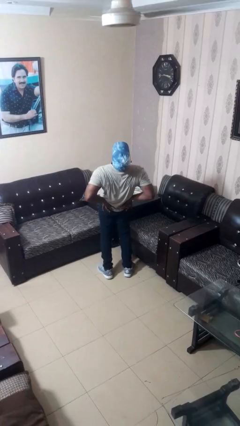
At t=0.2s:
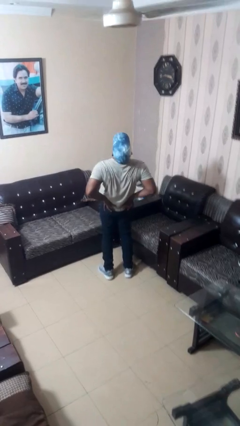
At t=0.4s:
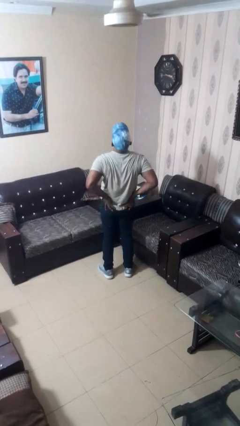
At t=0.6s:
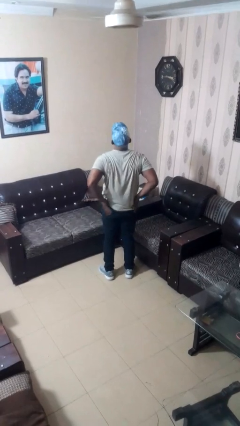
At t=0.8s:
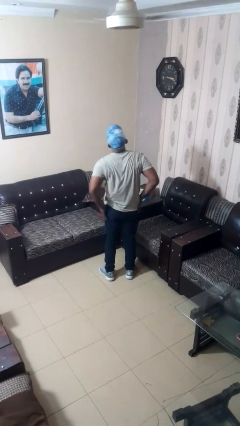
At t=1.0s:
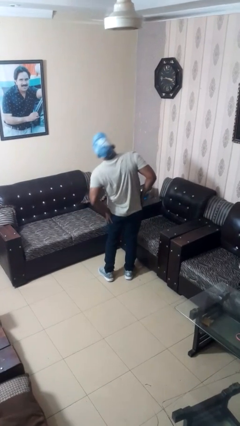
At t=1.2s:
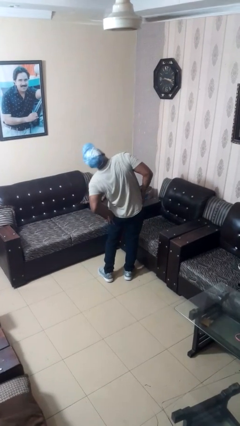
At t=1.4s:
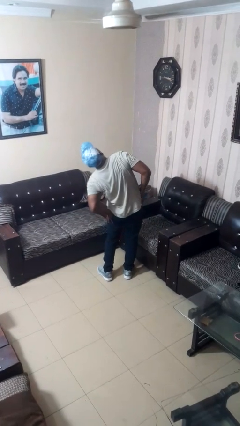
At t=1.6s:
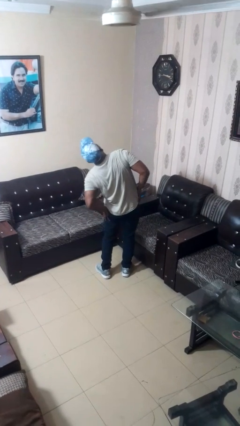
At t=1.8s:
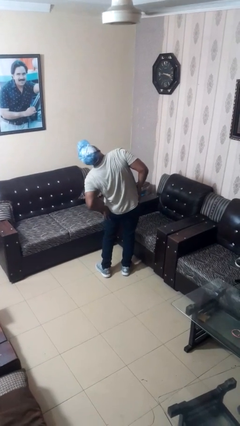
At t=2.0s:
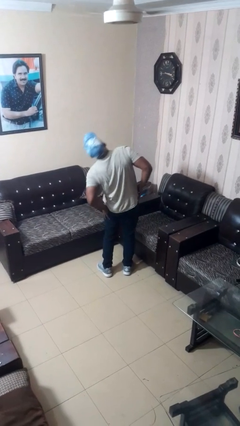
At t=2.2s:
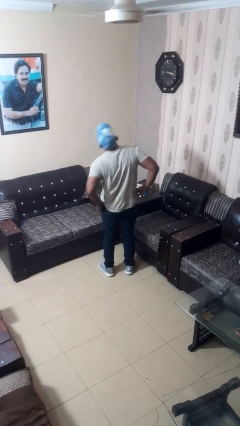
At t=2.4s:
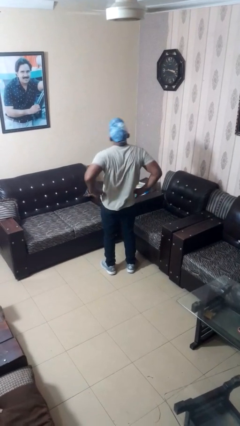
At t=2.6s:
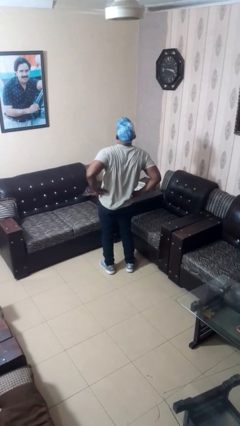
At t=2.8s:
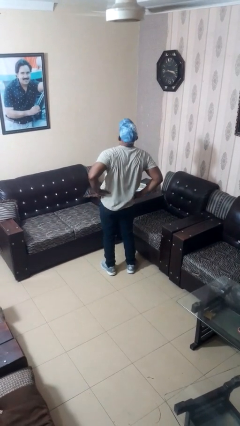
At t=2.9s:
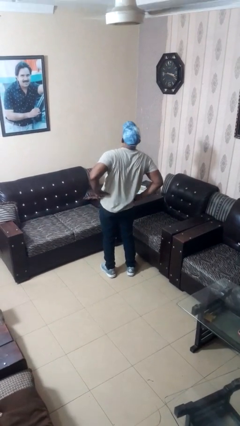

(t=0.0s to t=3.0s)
person stretches arms to side

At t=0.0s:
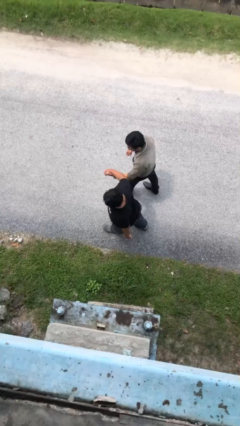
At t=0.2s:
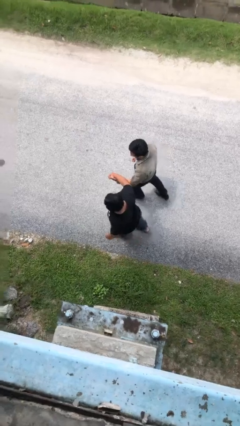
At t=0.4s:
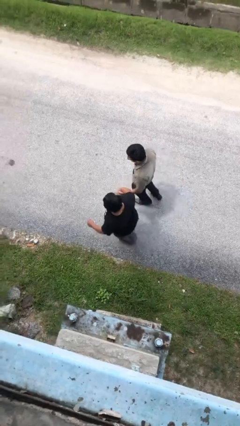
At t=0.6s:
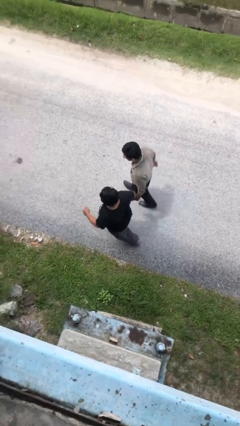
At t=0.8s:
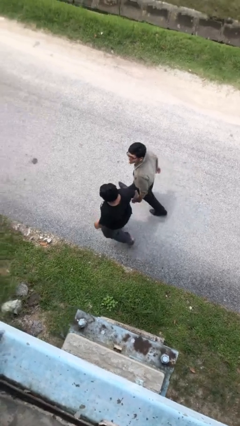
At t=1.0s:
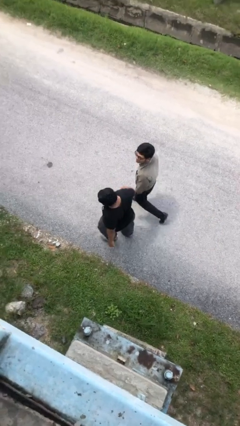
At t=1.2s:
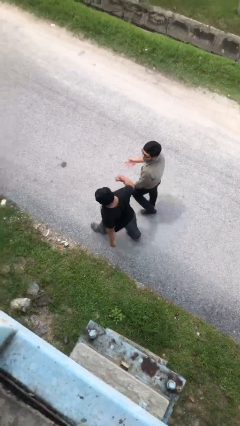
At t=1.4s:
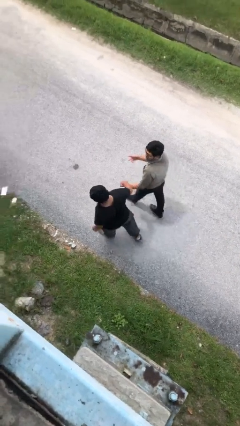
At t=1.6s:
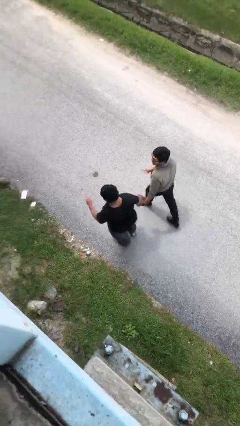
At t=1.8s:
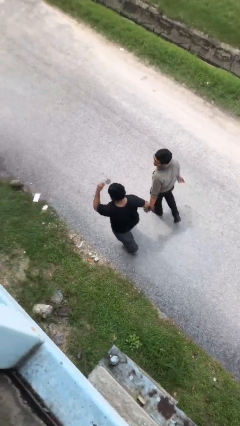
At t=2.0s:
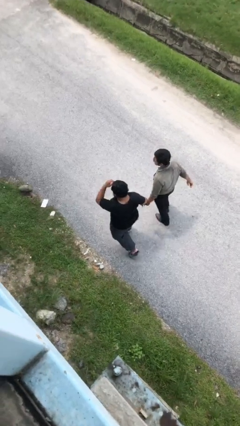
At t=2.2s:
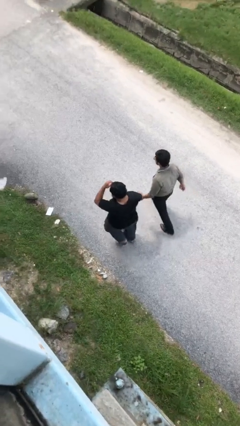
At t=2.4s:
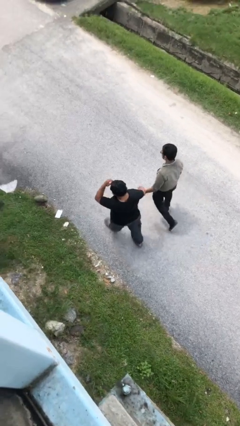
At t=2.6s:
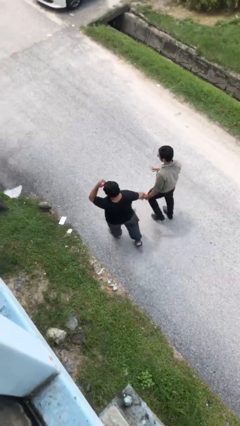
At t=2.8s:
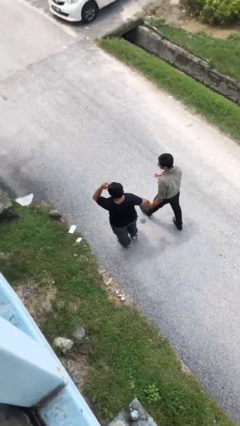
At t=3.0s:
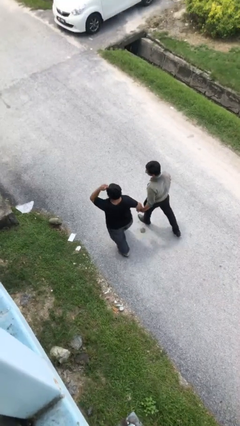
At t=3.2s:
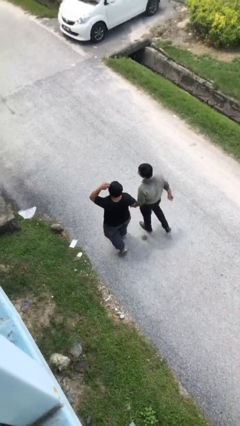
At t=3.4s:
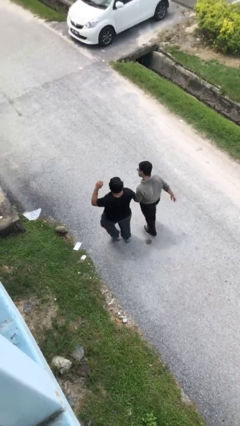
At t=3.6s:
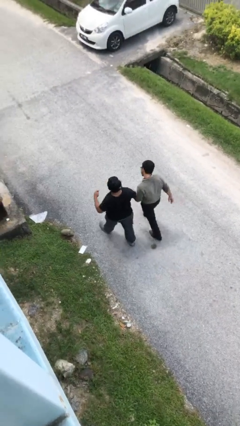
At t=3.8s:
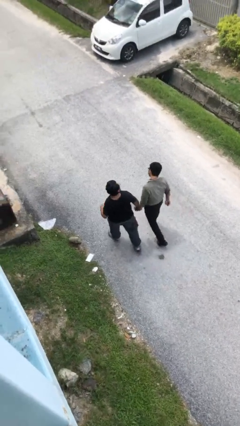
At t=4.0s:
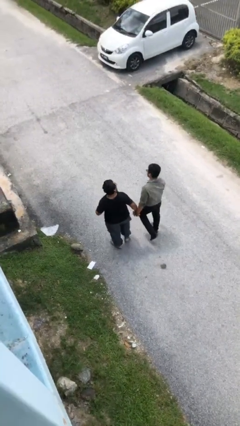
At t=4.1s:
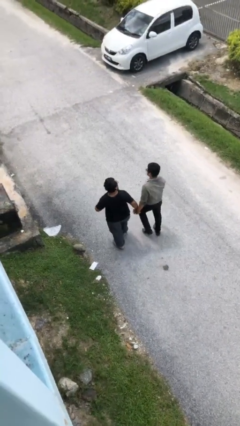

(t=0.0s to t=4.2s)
person holds hand

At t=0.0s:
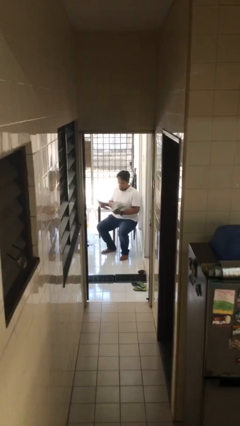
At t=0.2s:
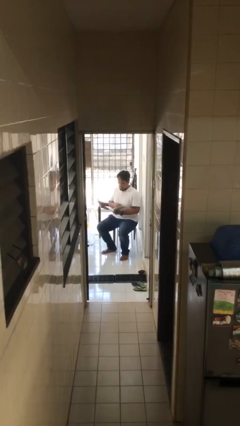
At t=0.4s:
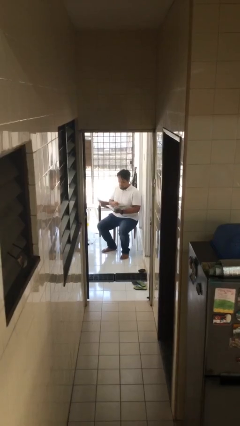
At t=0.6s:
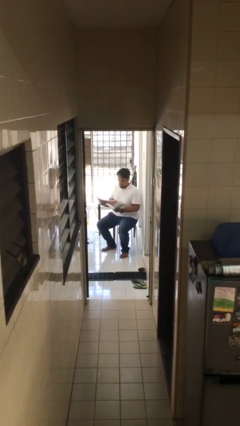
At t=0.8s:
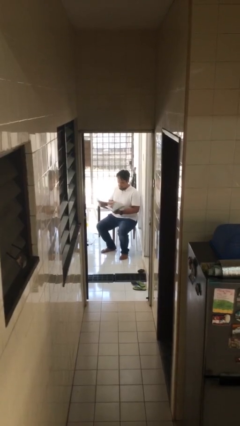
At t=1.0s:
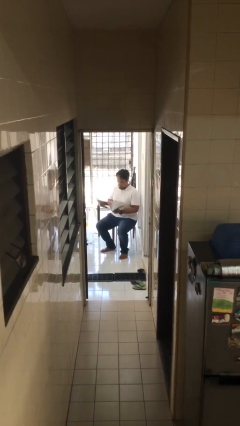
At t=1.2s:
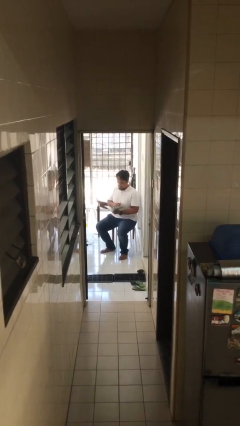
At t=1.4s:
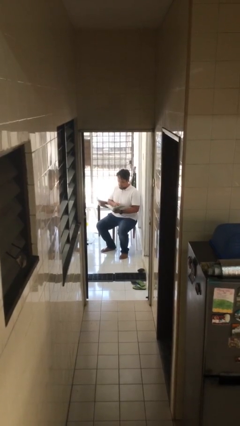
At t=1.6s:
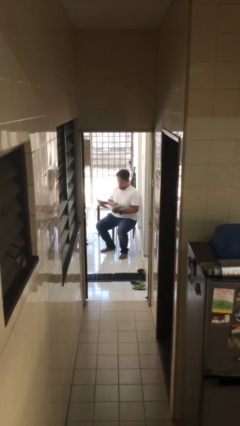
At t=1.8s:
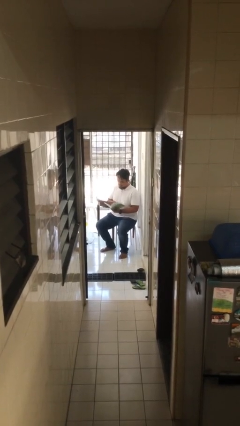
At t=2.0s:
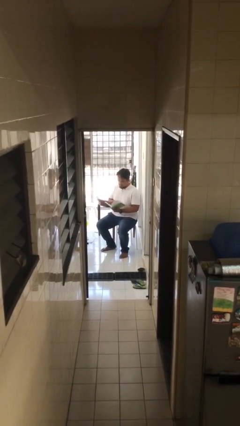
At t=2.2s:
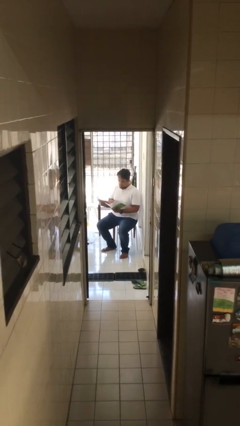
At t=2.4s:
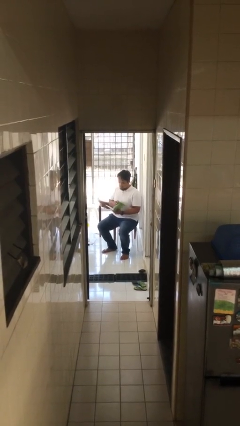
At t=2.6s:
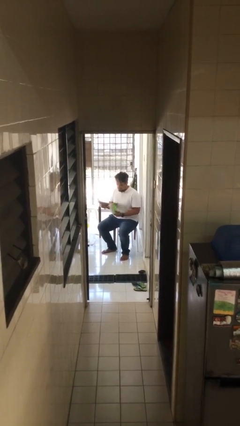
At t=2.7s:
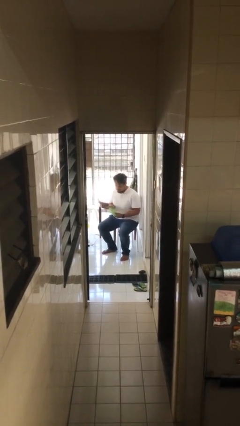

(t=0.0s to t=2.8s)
person reads document

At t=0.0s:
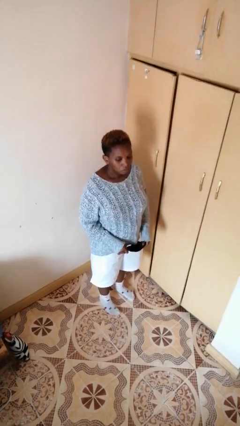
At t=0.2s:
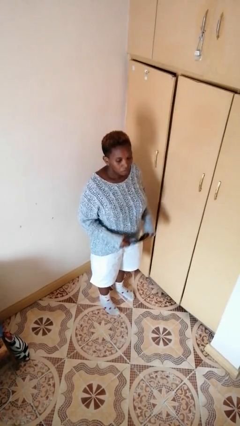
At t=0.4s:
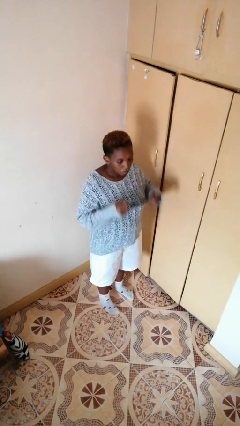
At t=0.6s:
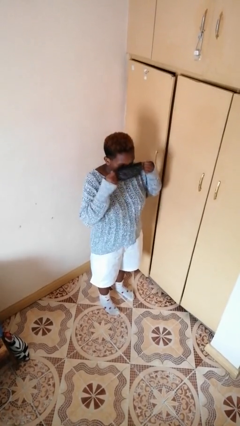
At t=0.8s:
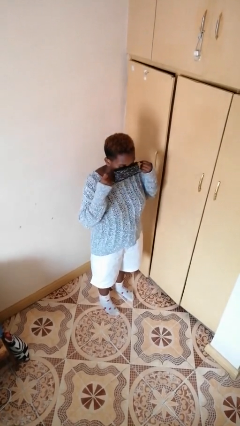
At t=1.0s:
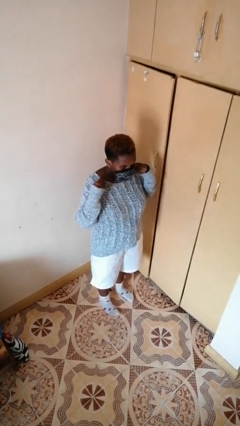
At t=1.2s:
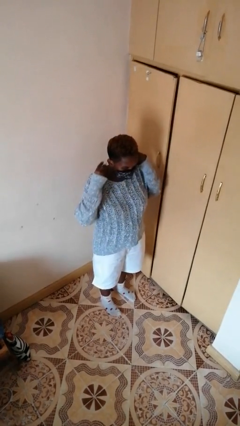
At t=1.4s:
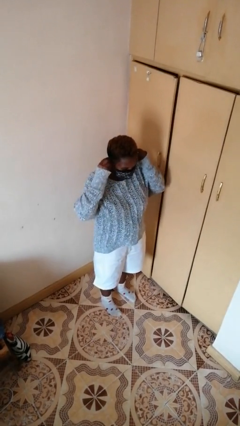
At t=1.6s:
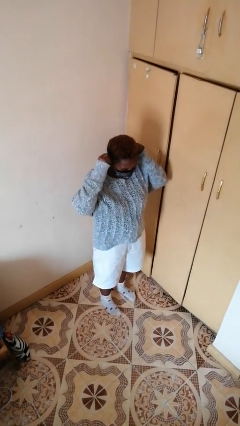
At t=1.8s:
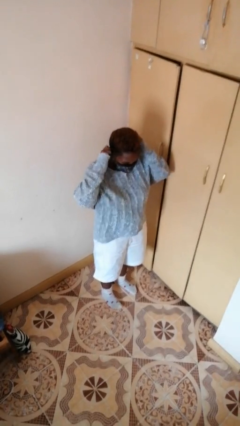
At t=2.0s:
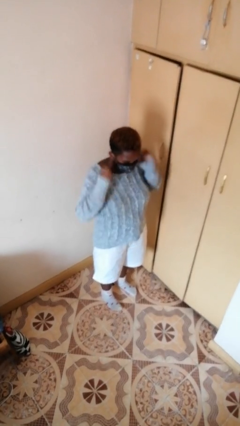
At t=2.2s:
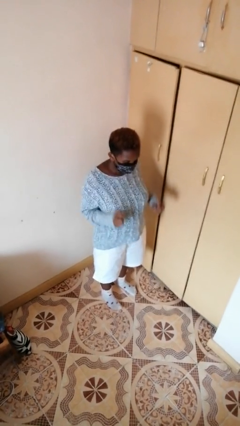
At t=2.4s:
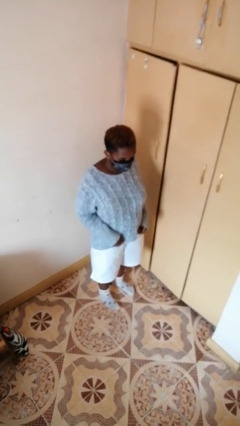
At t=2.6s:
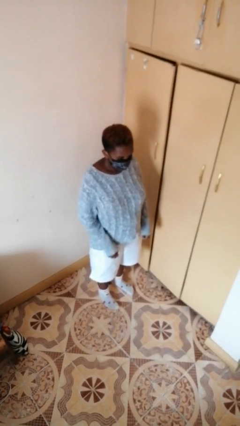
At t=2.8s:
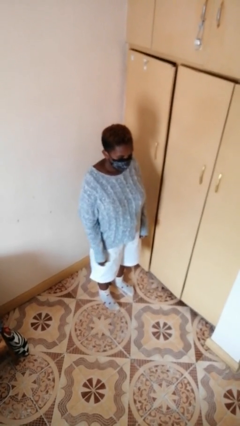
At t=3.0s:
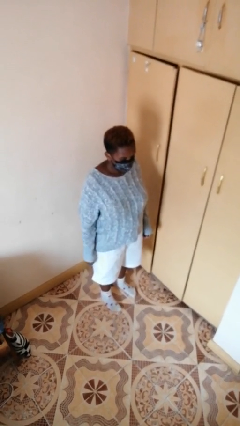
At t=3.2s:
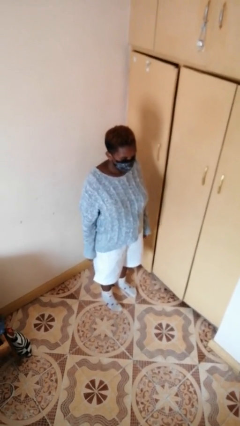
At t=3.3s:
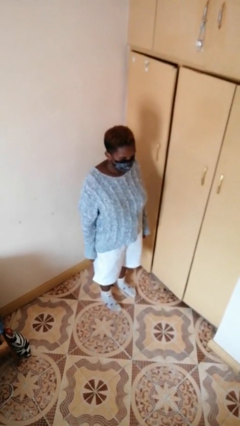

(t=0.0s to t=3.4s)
person puts on facemask

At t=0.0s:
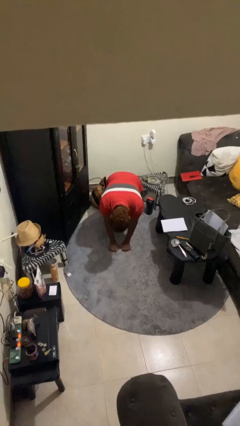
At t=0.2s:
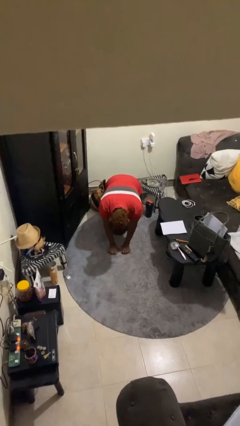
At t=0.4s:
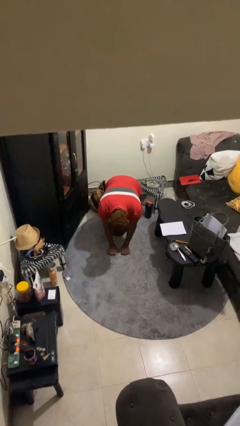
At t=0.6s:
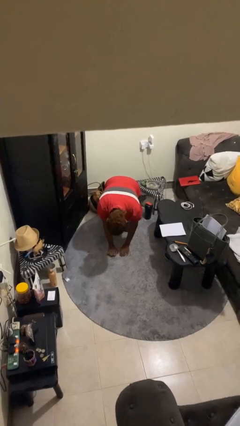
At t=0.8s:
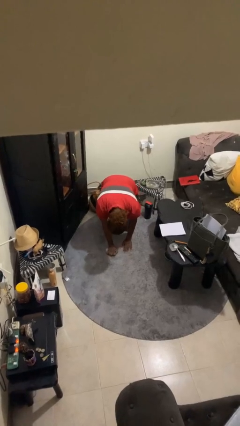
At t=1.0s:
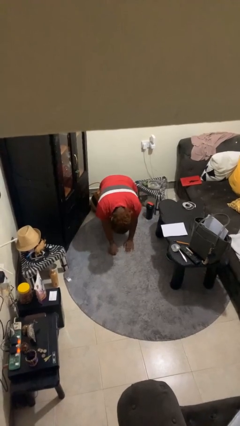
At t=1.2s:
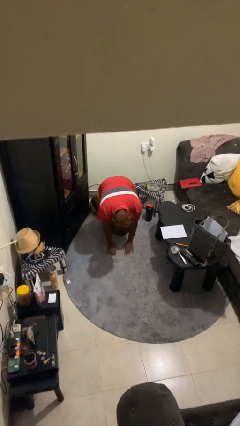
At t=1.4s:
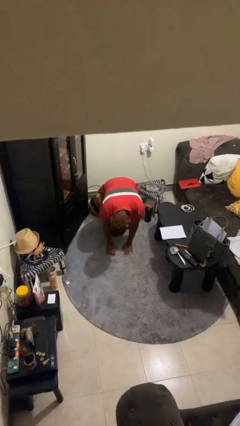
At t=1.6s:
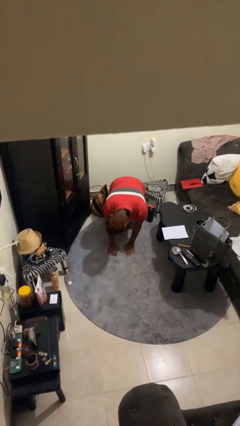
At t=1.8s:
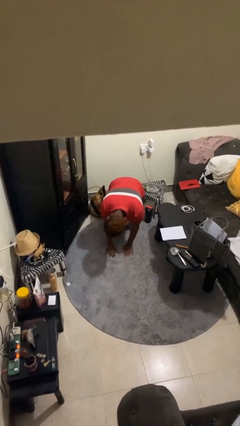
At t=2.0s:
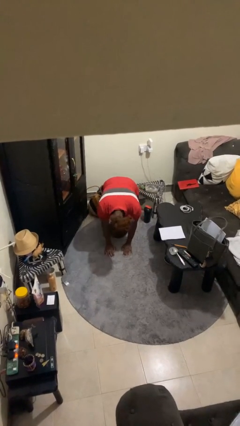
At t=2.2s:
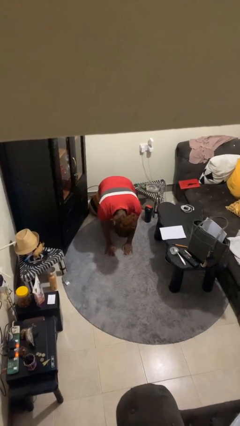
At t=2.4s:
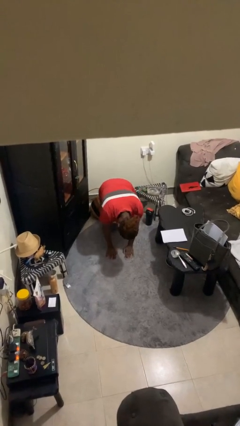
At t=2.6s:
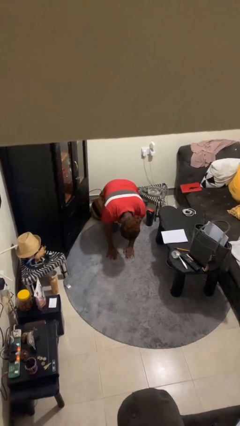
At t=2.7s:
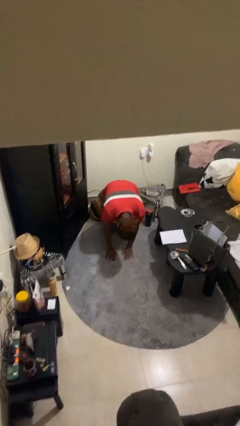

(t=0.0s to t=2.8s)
person crawls

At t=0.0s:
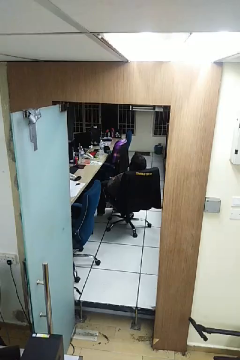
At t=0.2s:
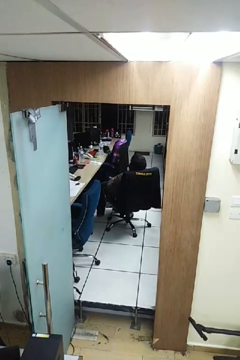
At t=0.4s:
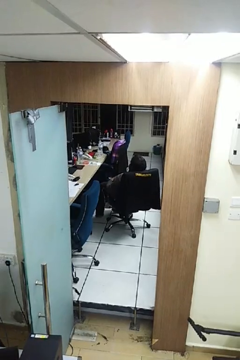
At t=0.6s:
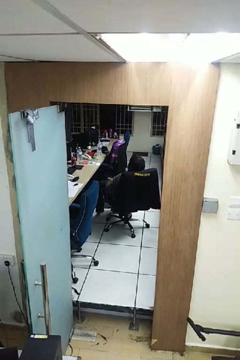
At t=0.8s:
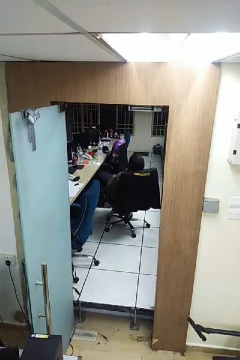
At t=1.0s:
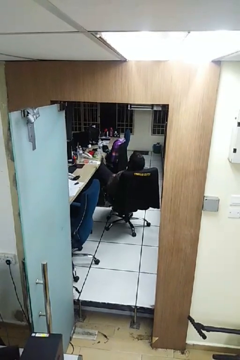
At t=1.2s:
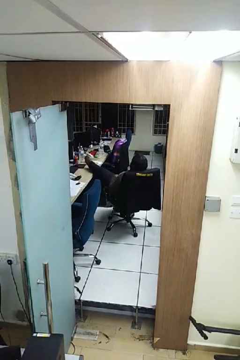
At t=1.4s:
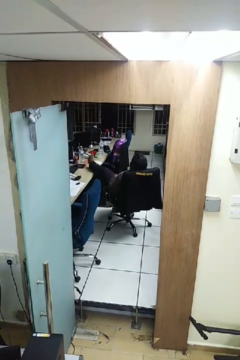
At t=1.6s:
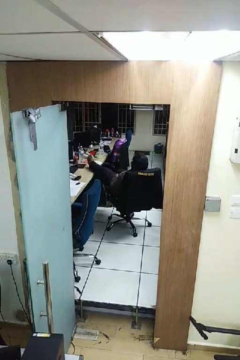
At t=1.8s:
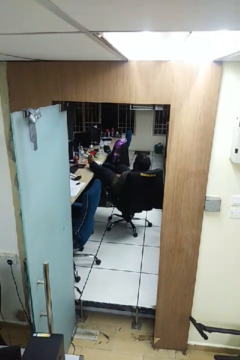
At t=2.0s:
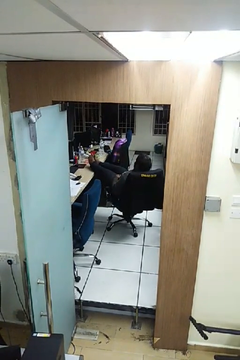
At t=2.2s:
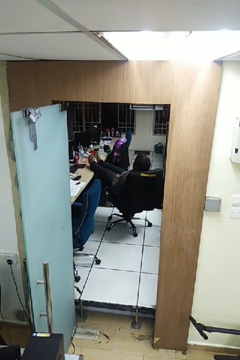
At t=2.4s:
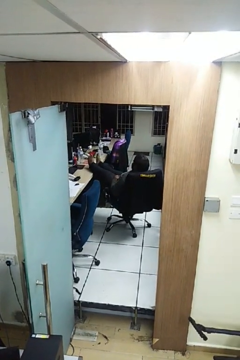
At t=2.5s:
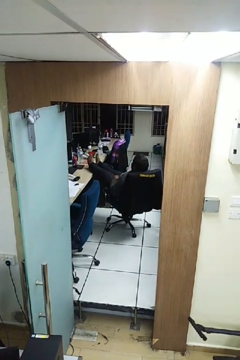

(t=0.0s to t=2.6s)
person puts feet up
